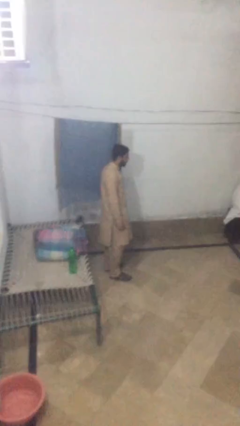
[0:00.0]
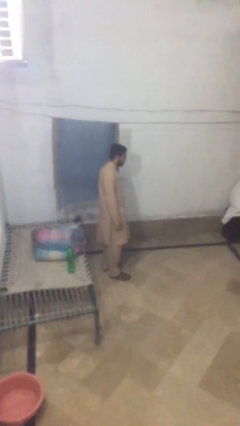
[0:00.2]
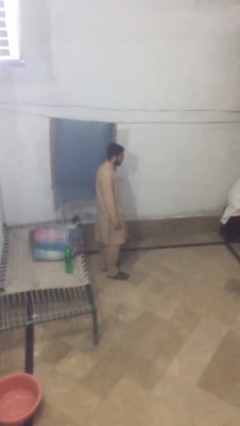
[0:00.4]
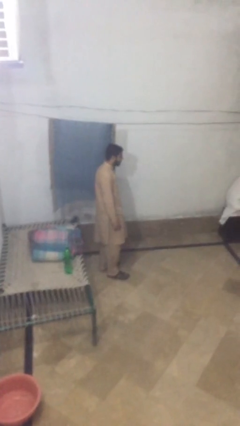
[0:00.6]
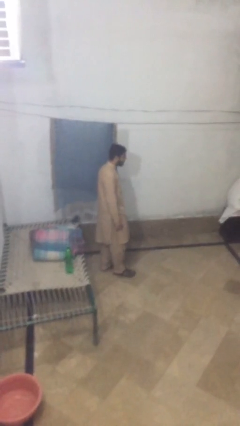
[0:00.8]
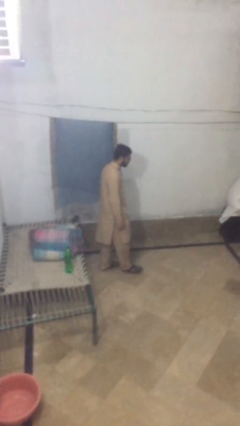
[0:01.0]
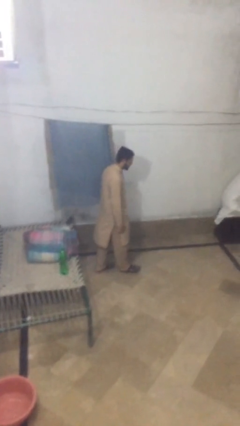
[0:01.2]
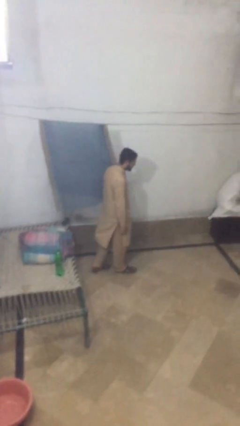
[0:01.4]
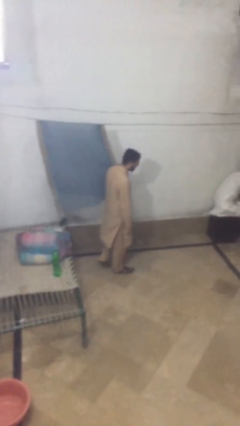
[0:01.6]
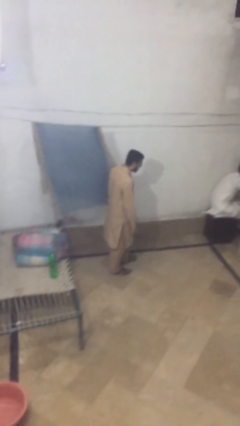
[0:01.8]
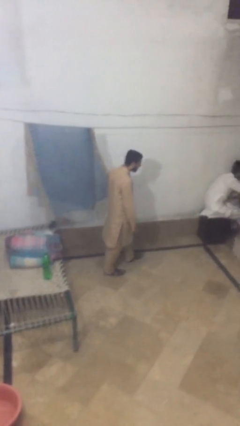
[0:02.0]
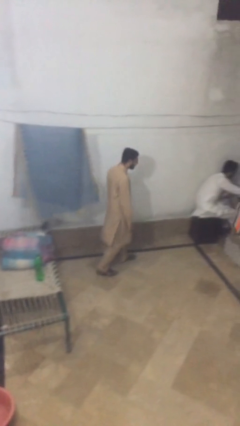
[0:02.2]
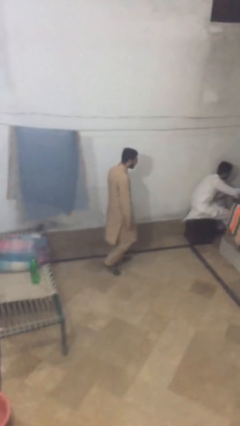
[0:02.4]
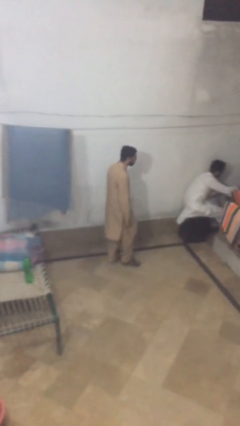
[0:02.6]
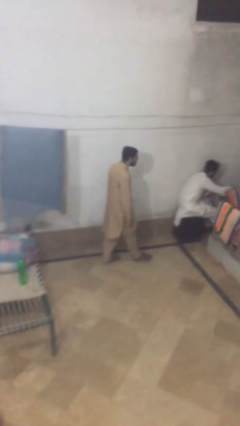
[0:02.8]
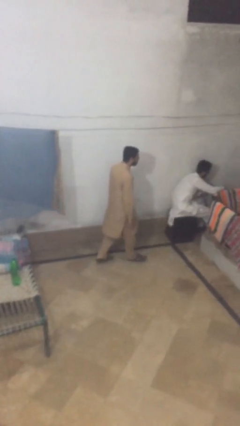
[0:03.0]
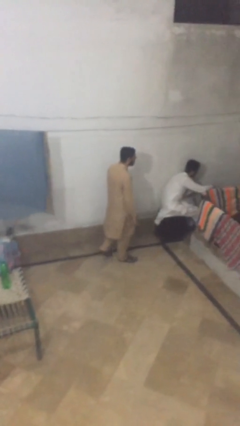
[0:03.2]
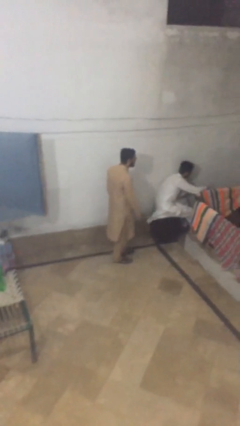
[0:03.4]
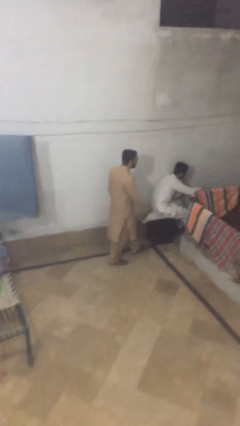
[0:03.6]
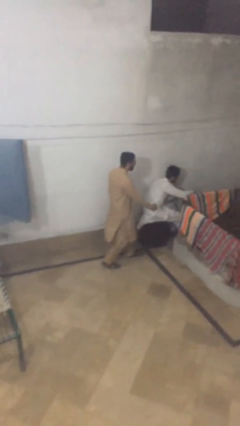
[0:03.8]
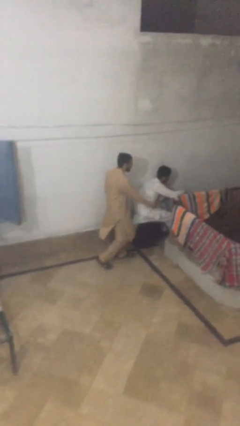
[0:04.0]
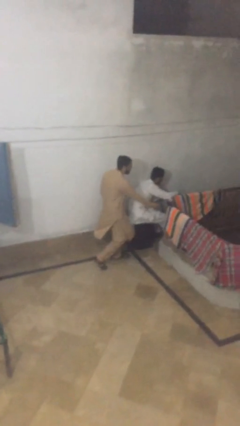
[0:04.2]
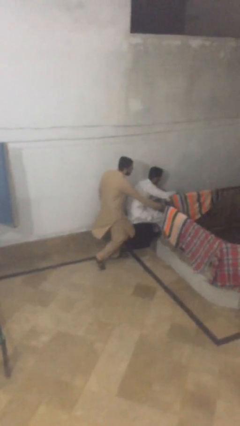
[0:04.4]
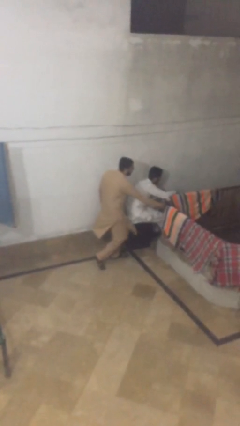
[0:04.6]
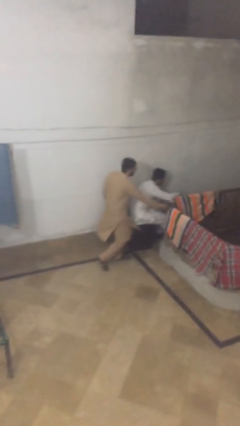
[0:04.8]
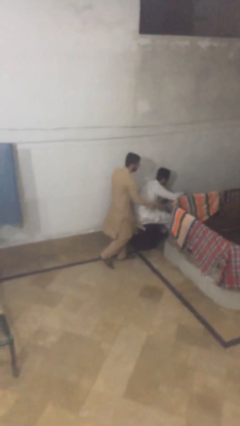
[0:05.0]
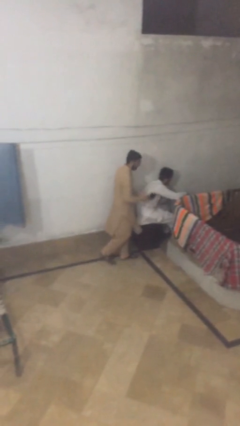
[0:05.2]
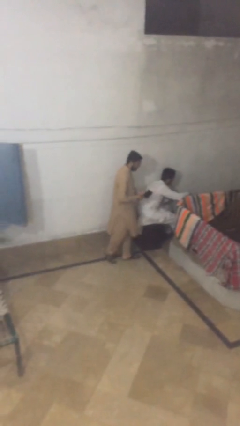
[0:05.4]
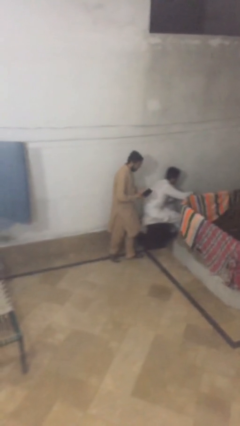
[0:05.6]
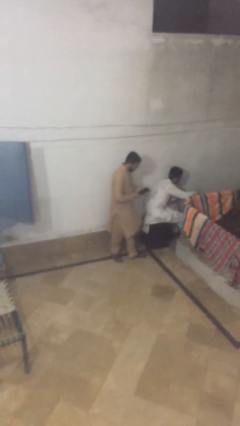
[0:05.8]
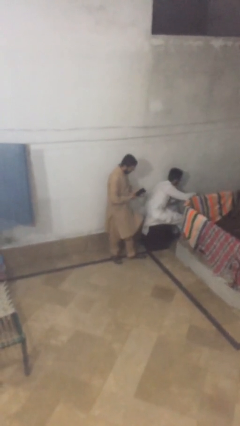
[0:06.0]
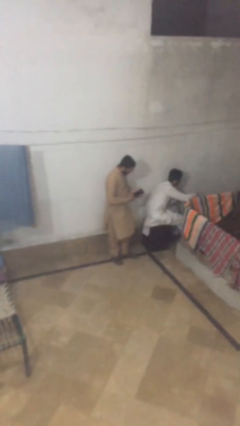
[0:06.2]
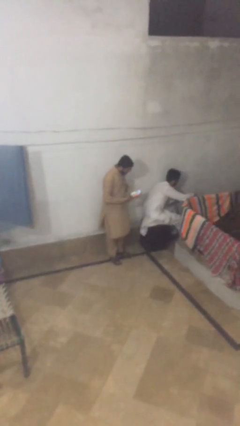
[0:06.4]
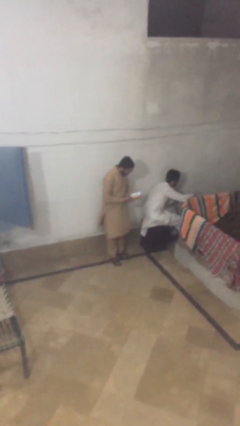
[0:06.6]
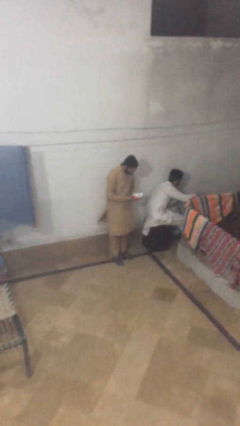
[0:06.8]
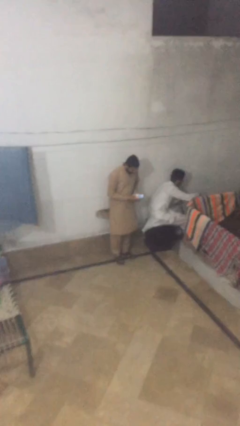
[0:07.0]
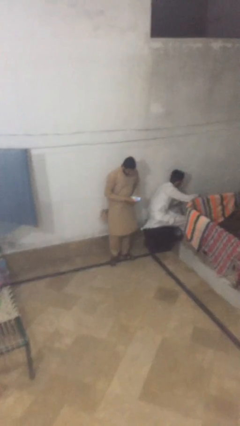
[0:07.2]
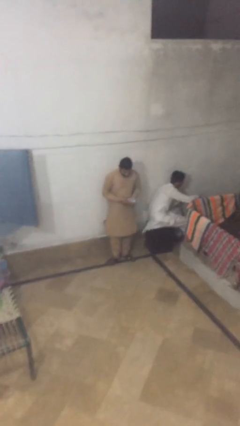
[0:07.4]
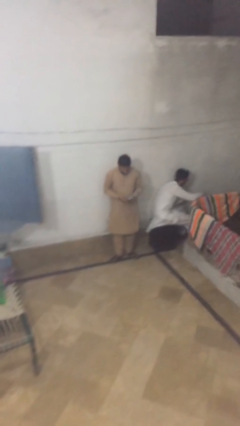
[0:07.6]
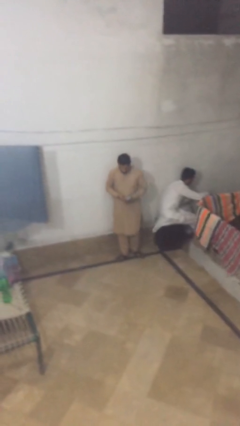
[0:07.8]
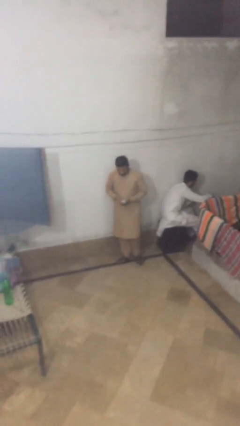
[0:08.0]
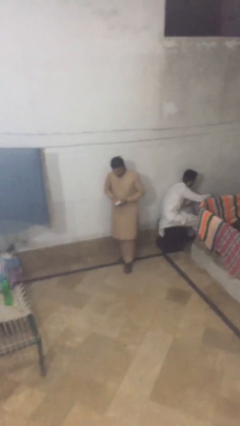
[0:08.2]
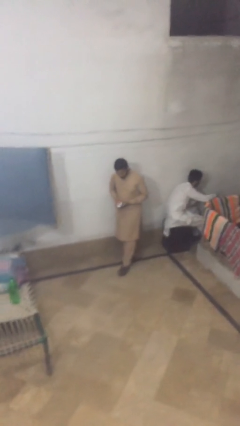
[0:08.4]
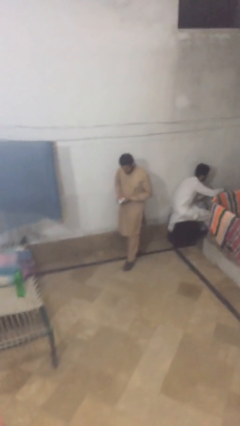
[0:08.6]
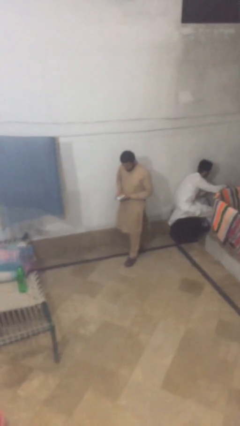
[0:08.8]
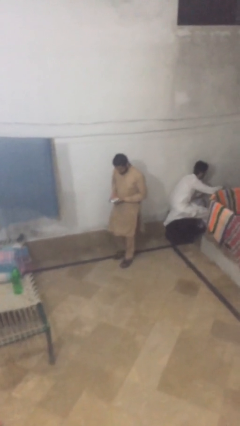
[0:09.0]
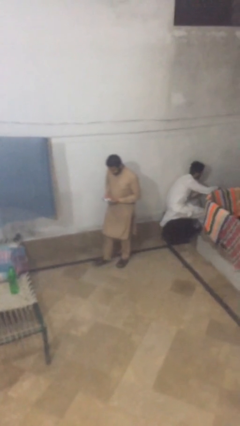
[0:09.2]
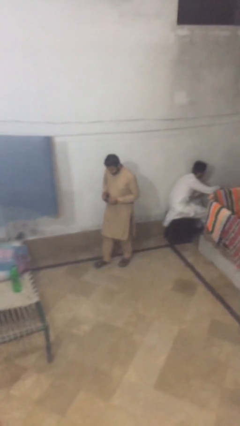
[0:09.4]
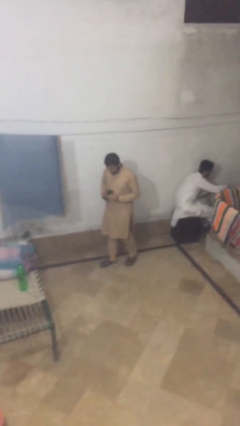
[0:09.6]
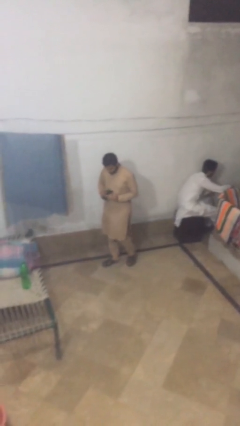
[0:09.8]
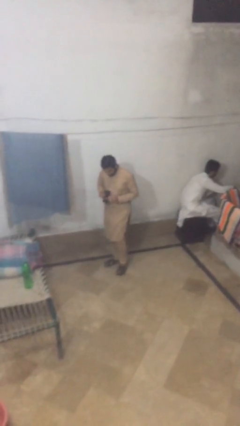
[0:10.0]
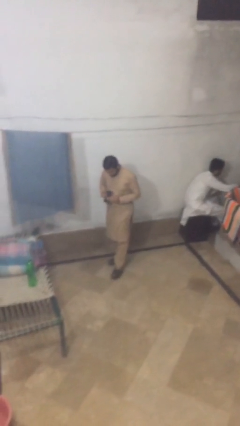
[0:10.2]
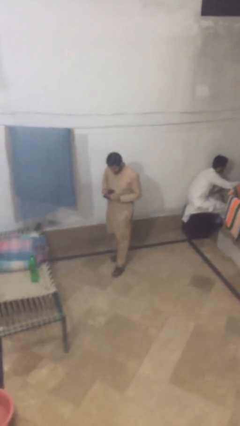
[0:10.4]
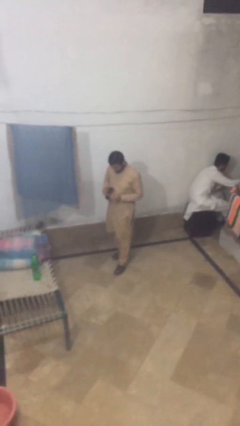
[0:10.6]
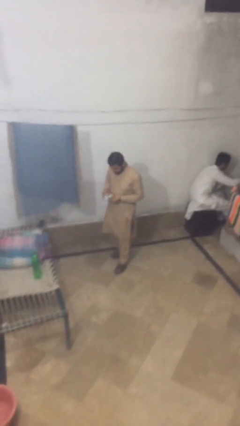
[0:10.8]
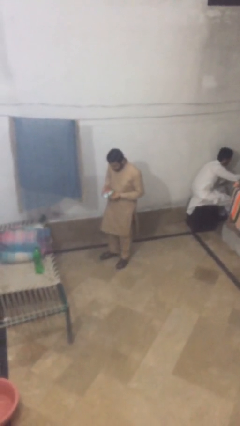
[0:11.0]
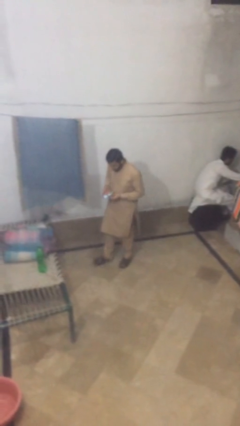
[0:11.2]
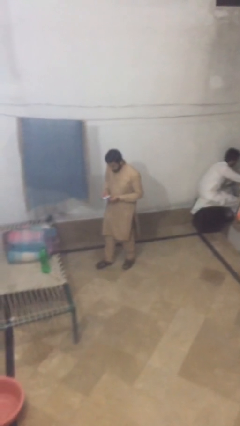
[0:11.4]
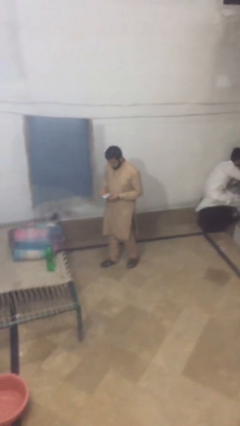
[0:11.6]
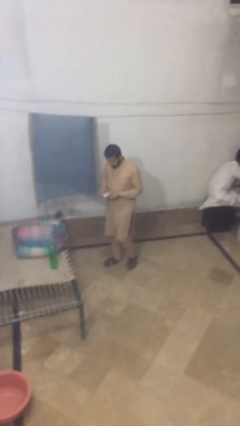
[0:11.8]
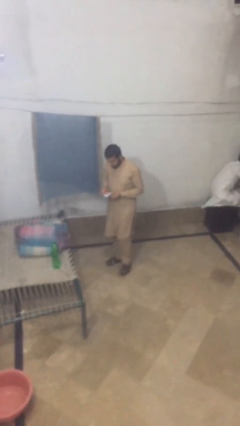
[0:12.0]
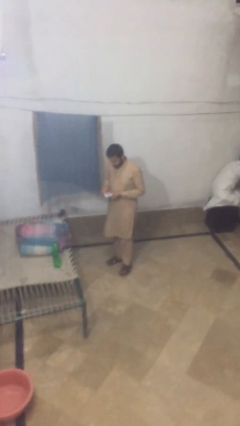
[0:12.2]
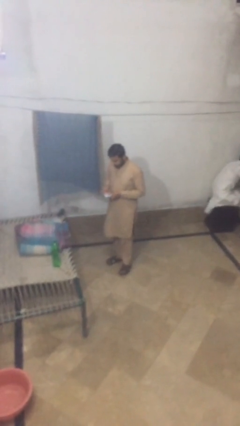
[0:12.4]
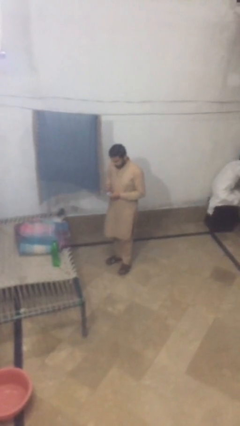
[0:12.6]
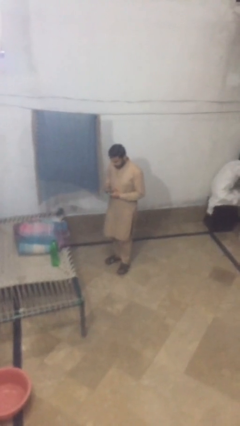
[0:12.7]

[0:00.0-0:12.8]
person steals object from person

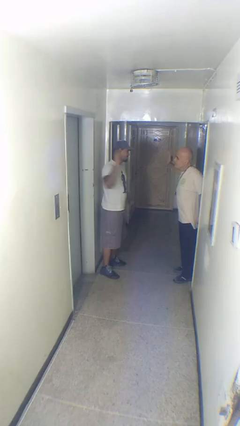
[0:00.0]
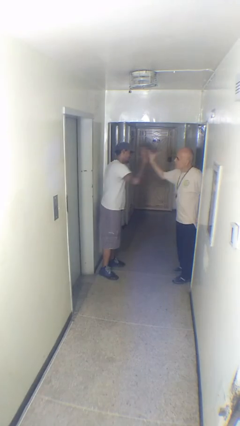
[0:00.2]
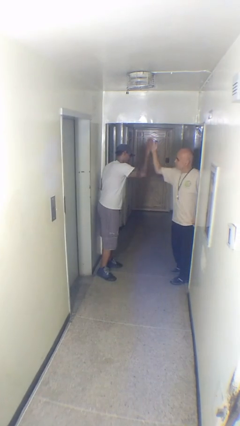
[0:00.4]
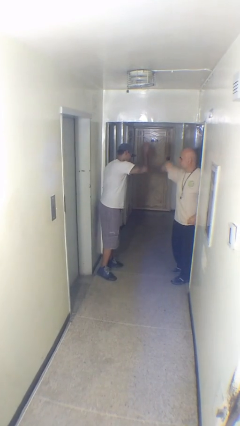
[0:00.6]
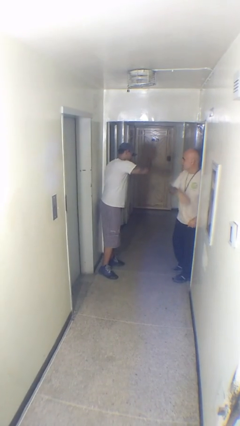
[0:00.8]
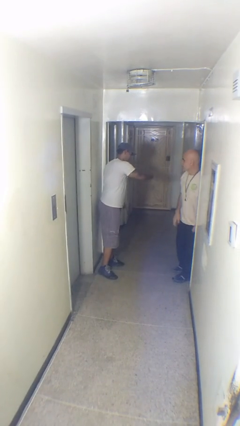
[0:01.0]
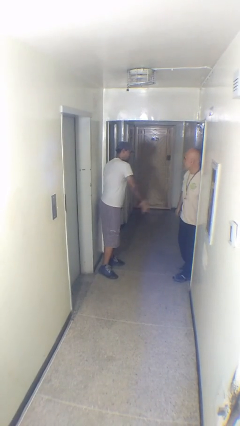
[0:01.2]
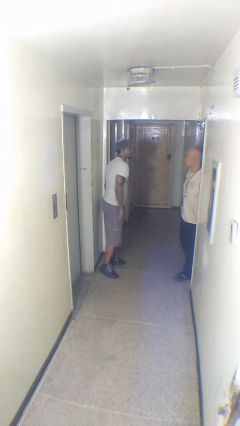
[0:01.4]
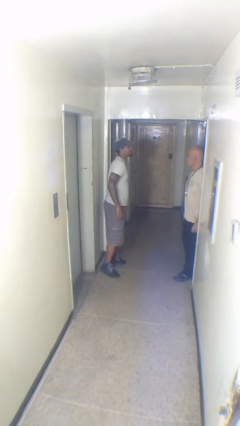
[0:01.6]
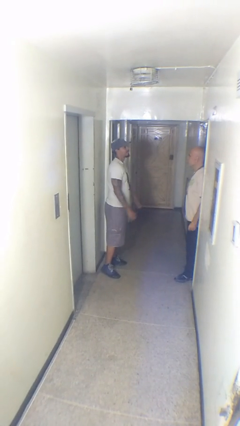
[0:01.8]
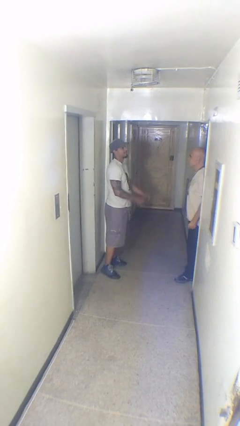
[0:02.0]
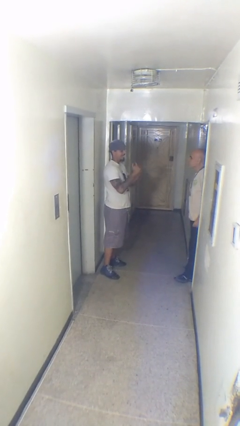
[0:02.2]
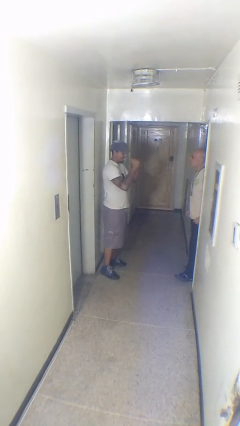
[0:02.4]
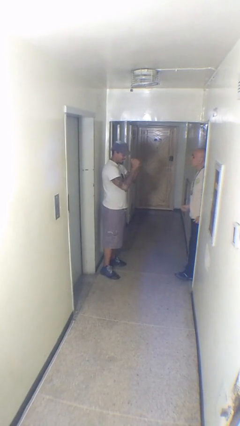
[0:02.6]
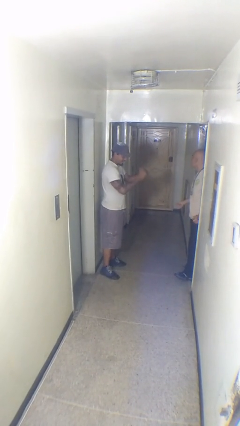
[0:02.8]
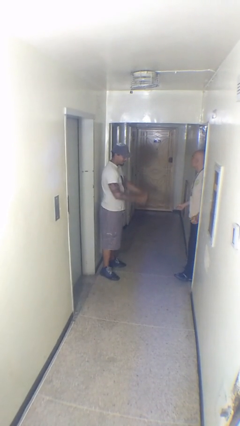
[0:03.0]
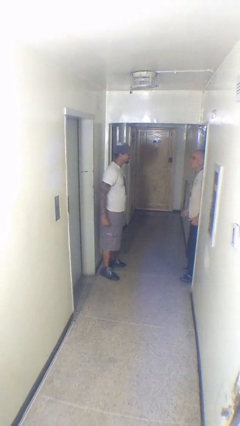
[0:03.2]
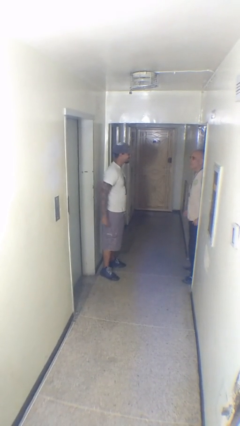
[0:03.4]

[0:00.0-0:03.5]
person highfives hand

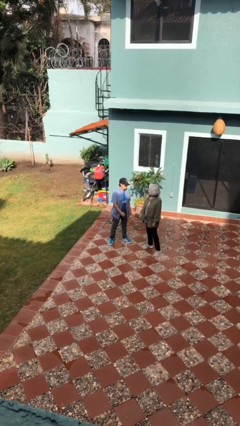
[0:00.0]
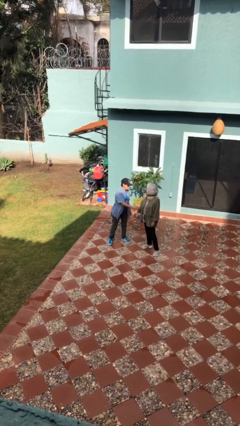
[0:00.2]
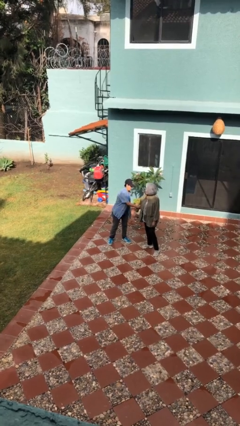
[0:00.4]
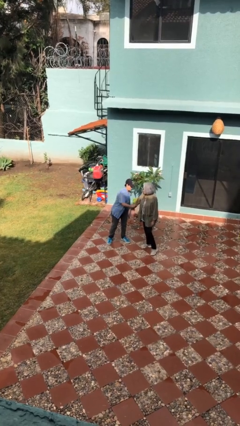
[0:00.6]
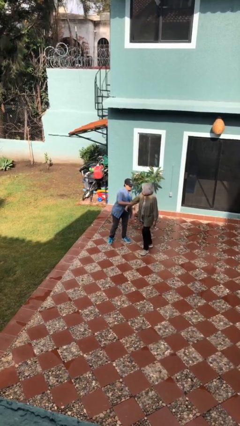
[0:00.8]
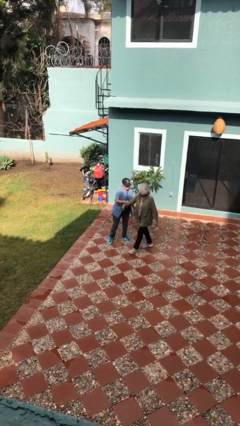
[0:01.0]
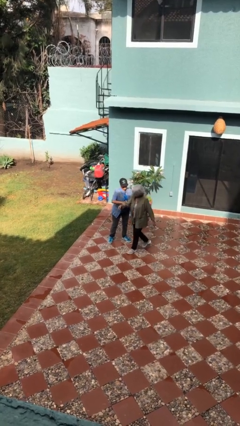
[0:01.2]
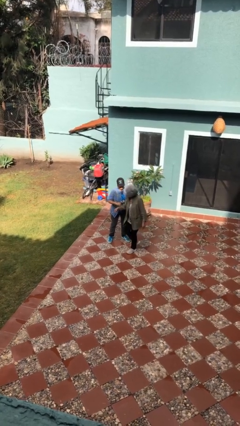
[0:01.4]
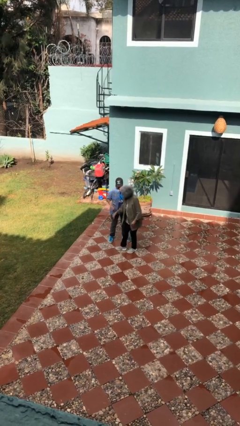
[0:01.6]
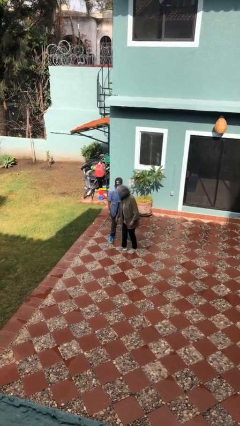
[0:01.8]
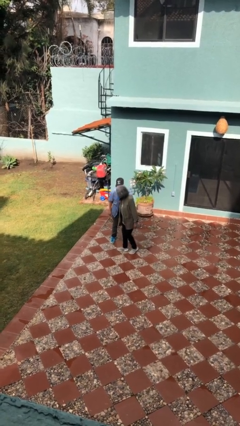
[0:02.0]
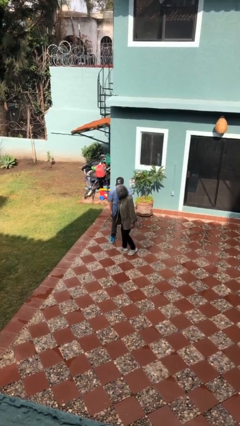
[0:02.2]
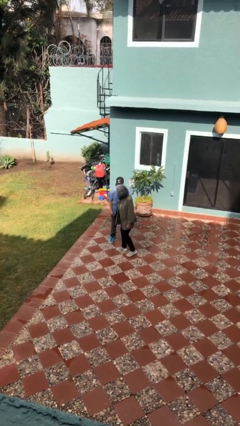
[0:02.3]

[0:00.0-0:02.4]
person grabs person by forearm
